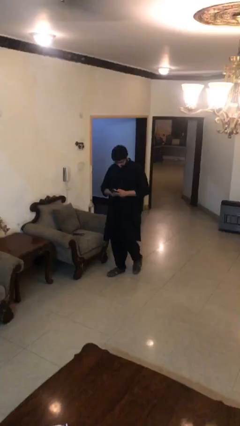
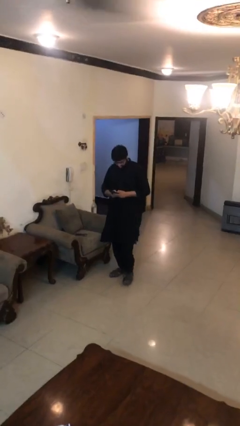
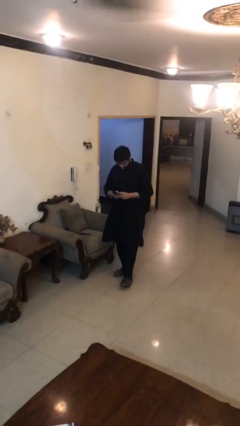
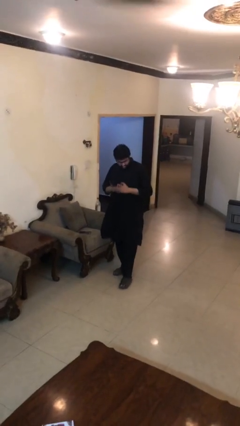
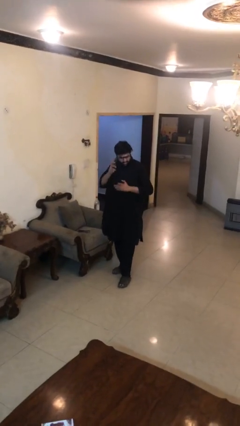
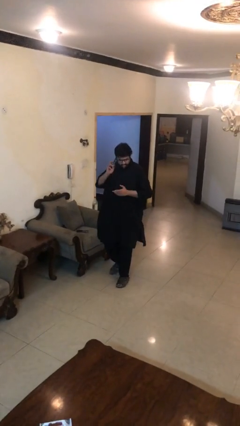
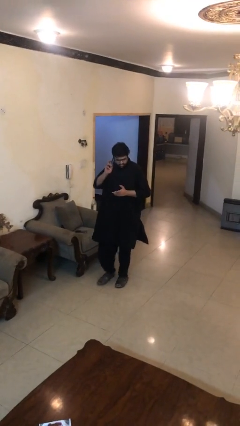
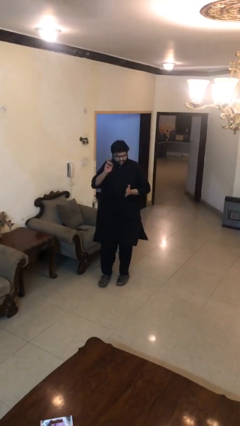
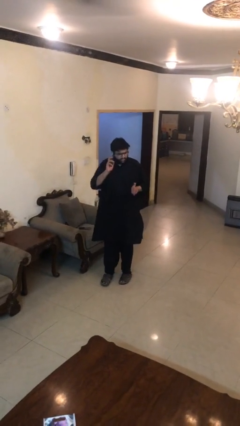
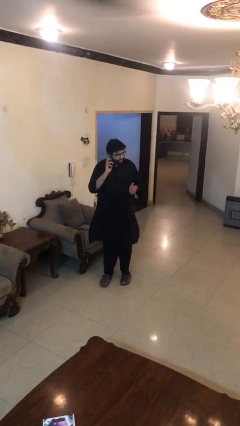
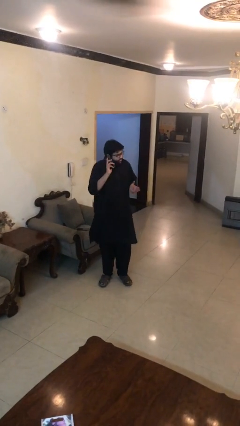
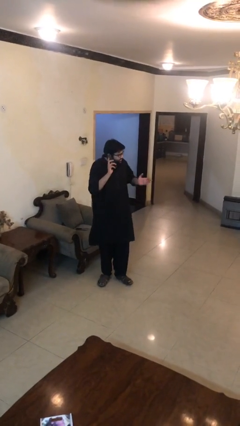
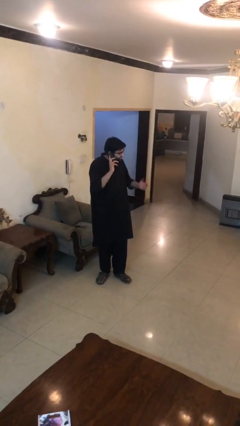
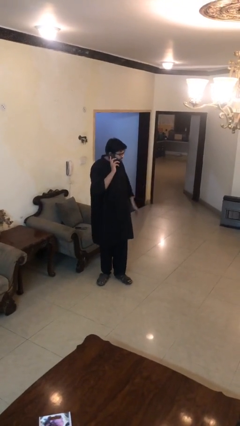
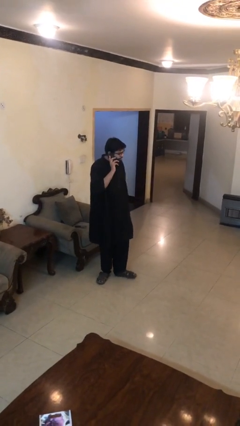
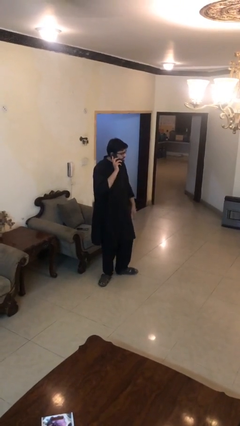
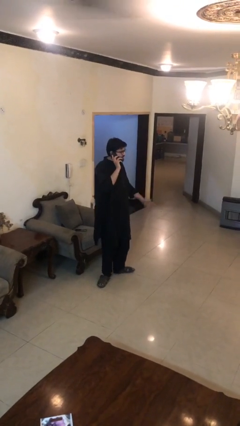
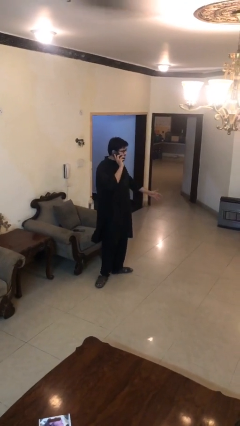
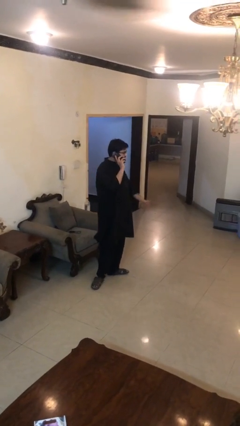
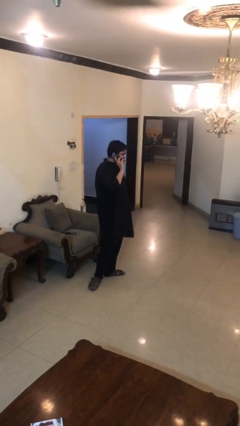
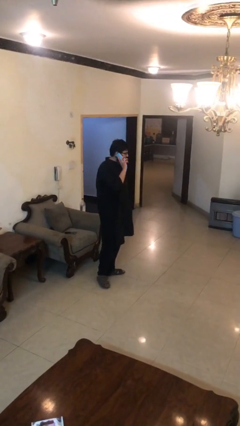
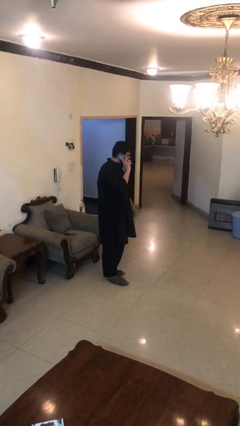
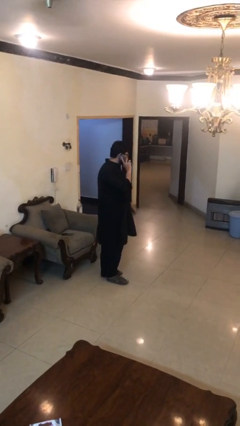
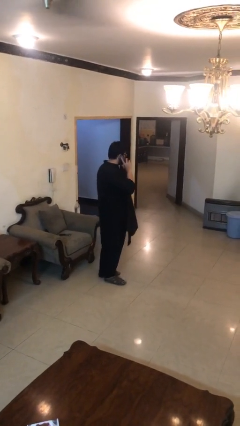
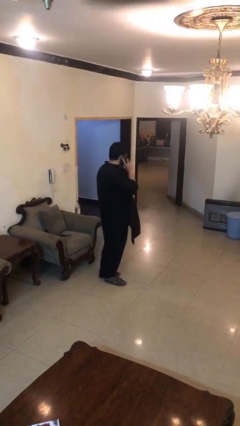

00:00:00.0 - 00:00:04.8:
person talks on phone

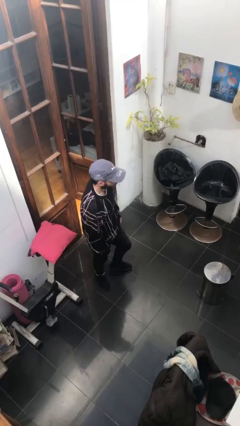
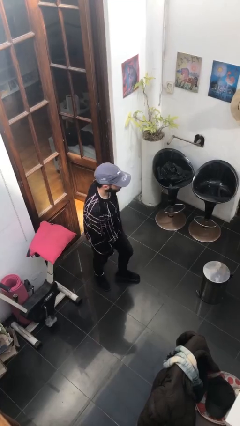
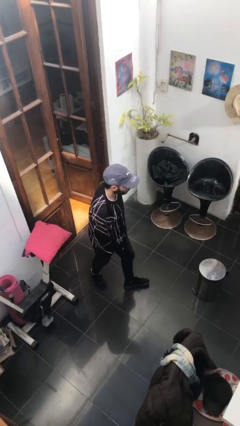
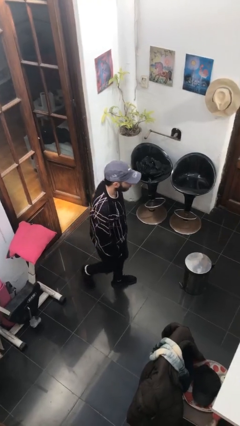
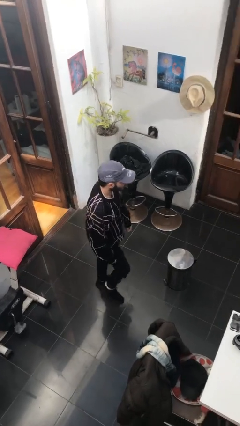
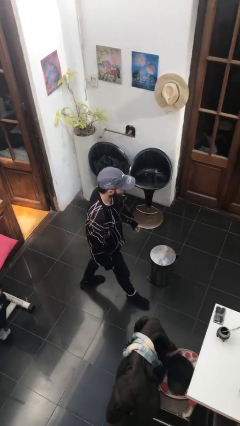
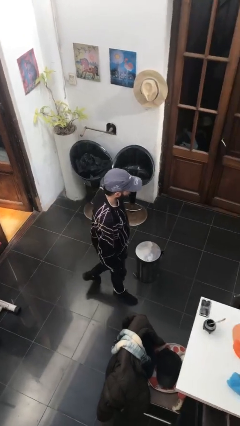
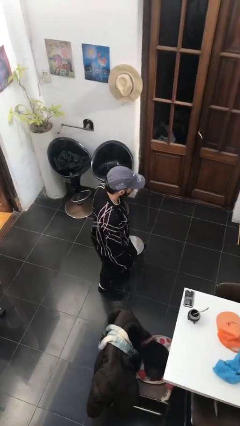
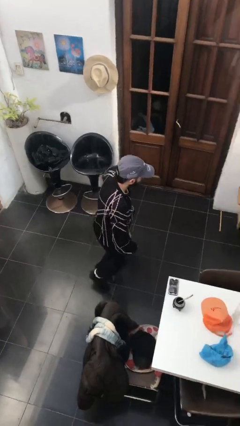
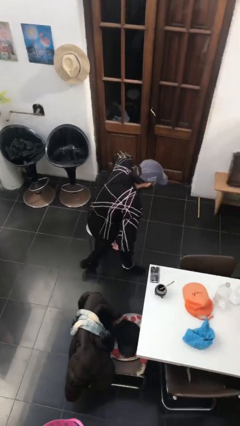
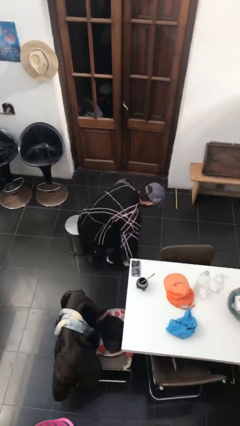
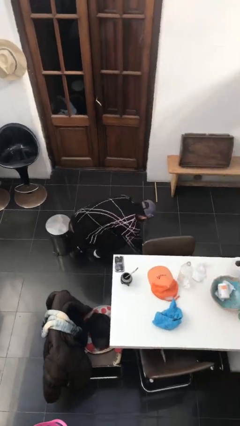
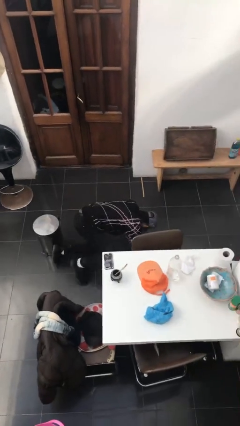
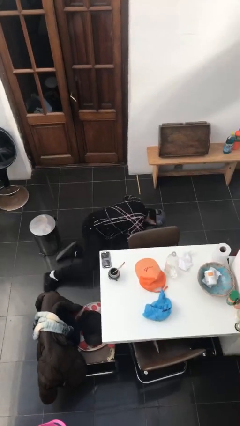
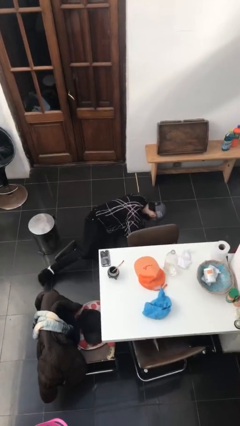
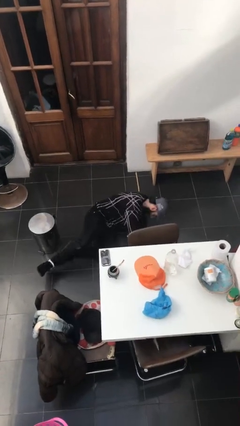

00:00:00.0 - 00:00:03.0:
person trips on object on floor

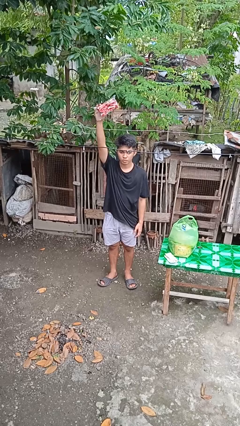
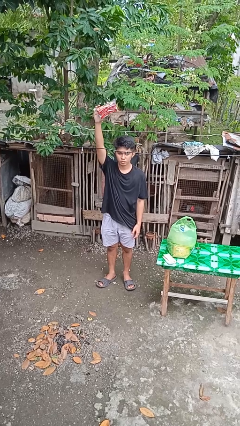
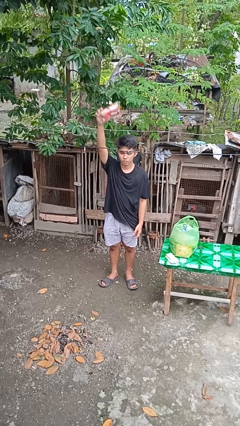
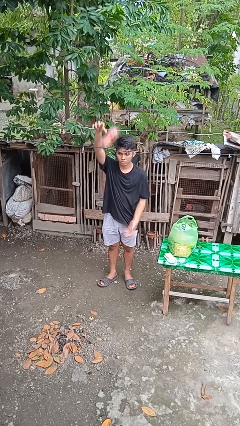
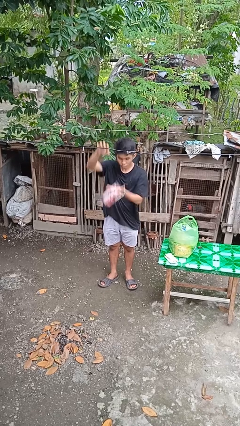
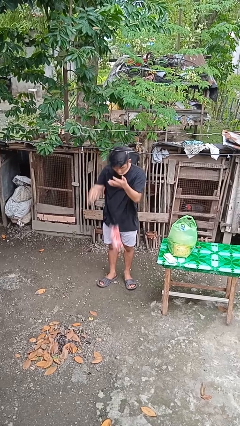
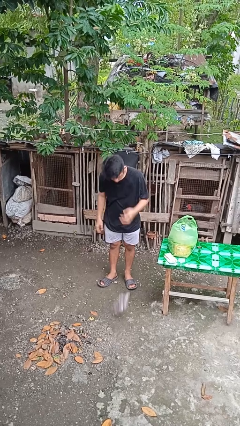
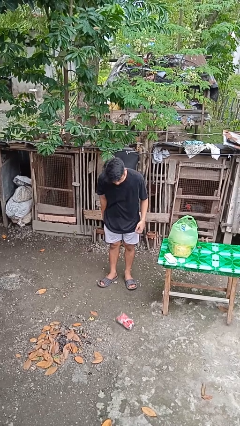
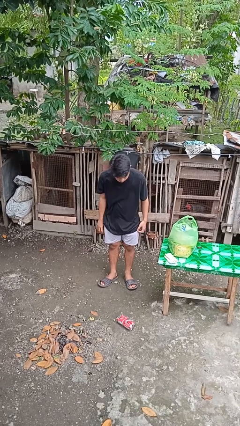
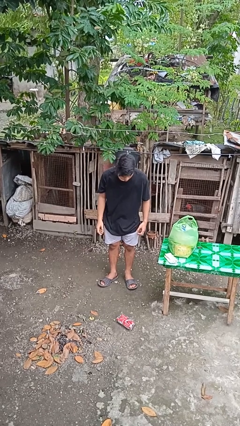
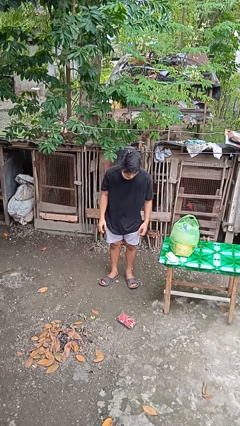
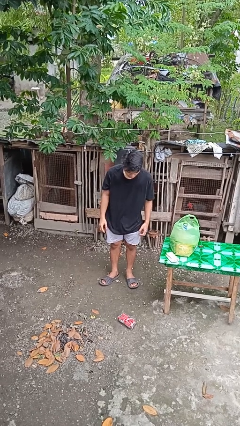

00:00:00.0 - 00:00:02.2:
person drops object

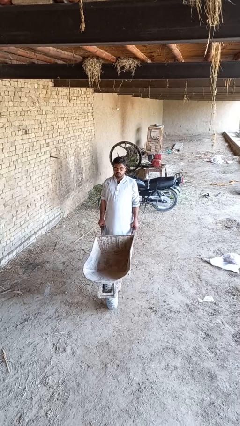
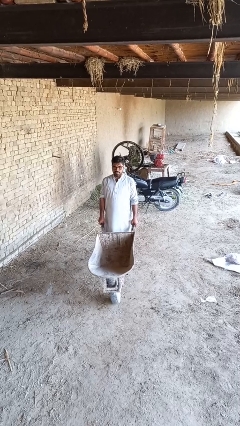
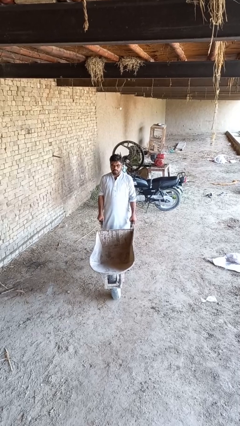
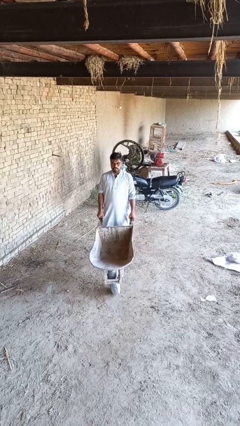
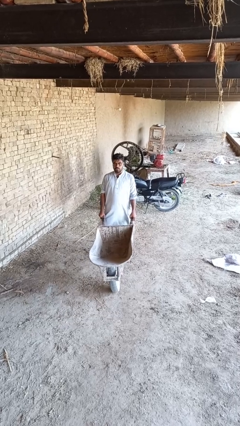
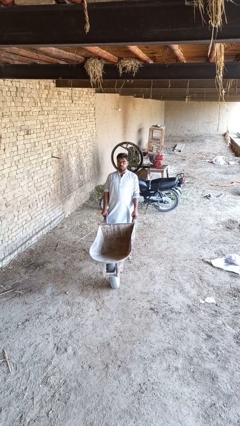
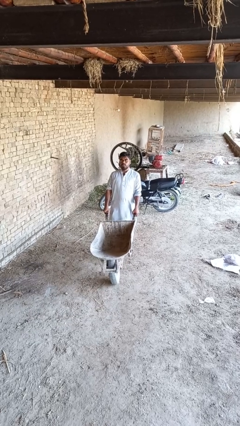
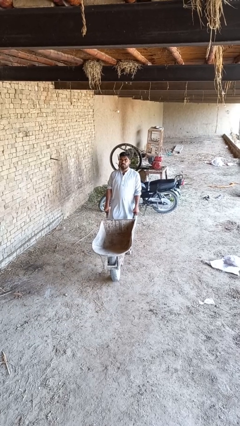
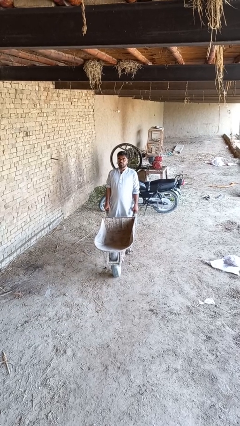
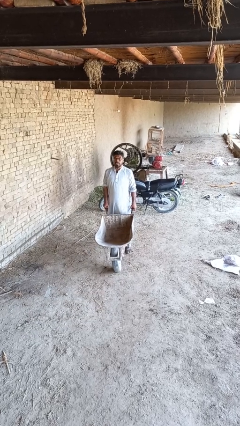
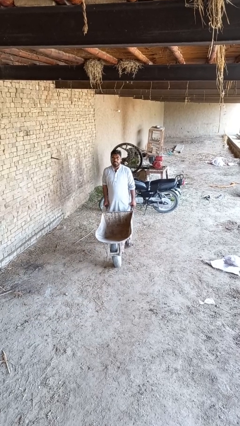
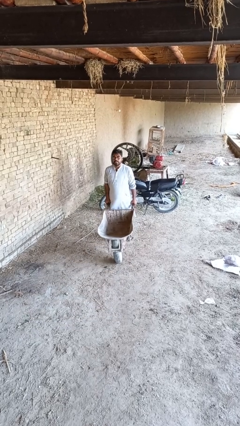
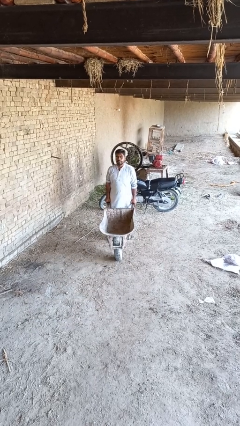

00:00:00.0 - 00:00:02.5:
person pulls wheeled cart

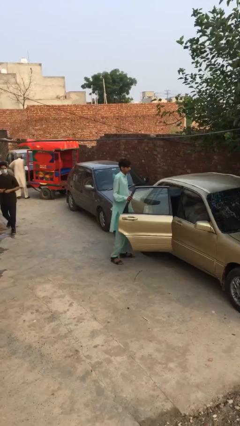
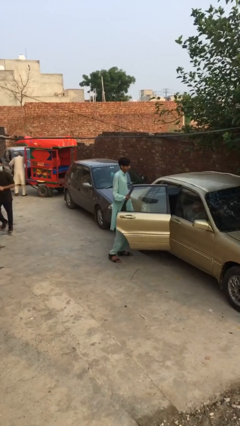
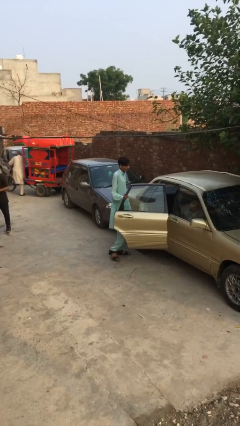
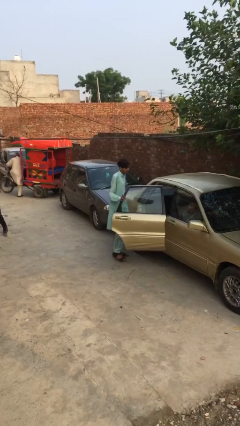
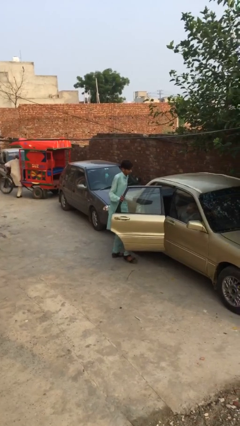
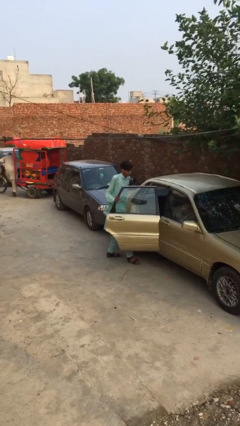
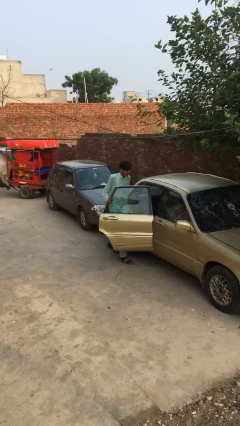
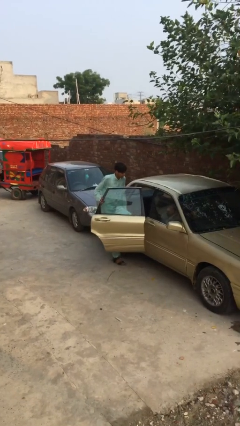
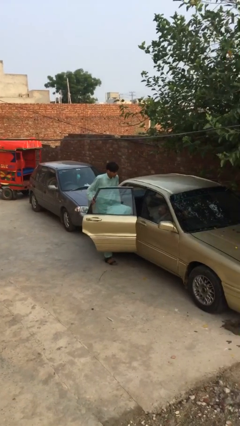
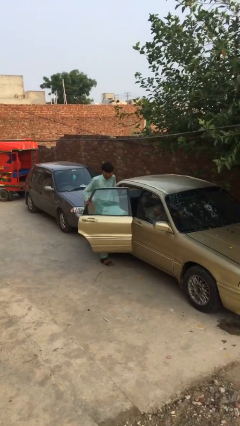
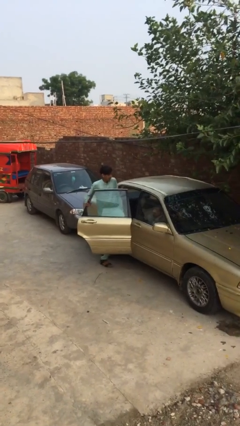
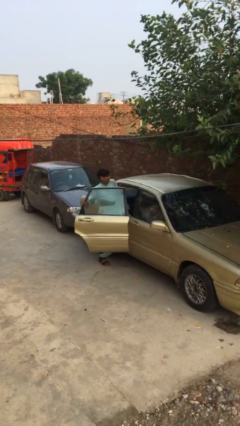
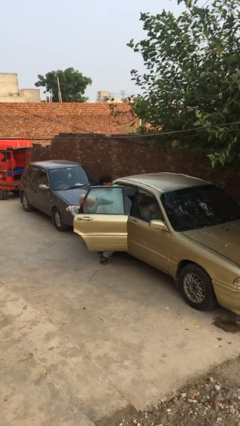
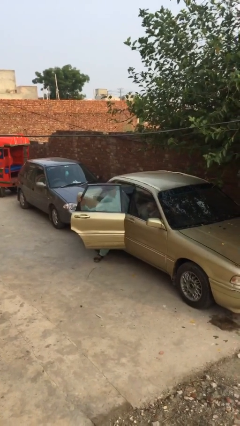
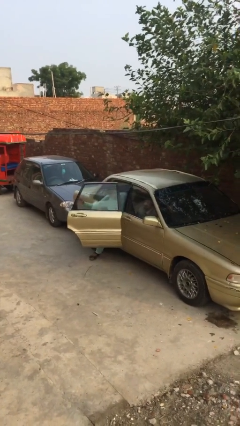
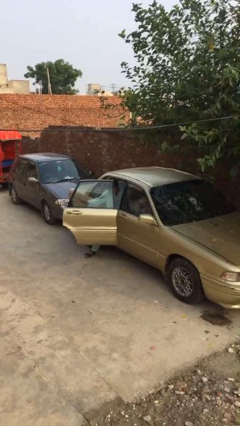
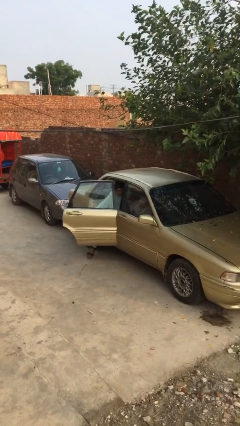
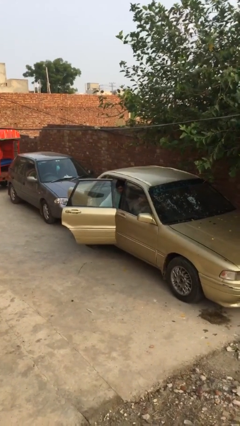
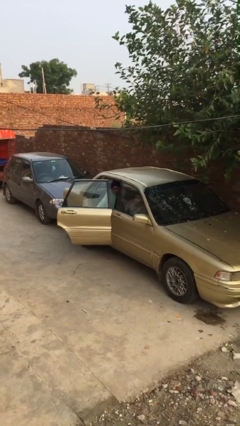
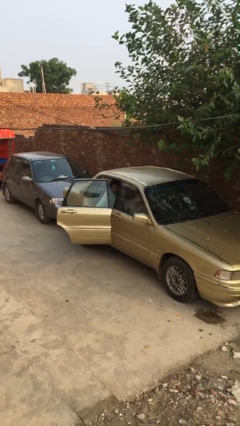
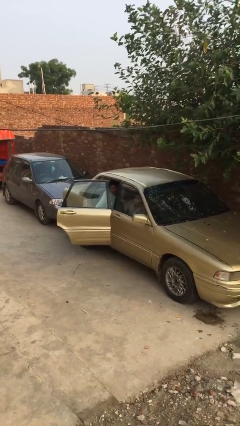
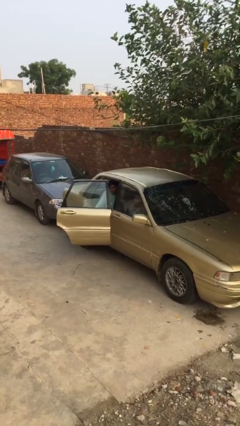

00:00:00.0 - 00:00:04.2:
person enters car

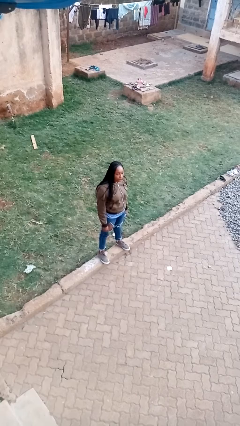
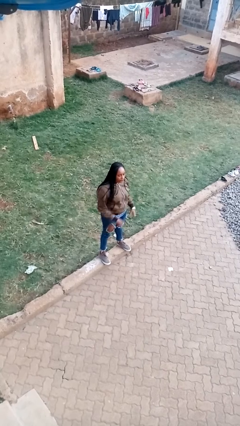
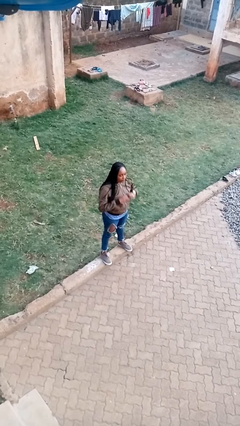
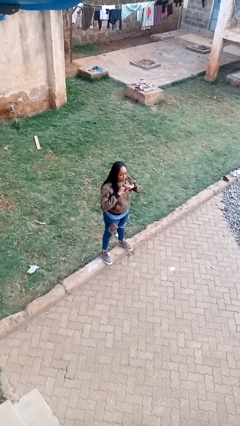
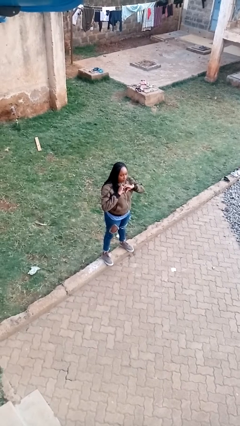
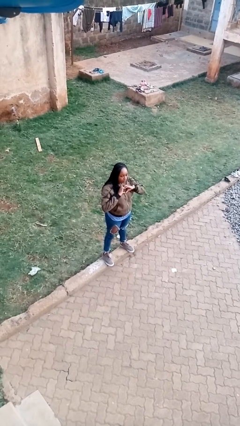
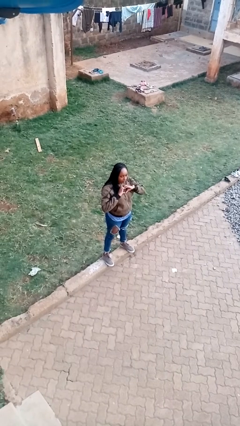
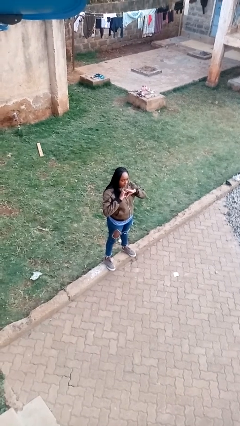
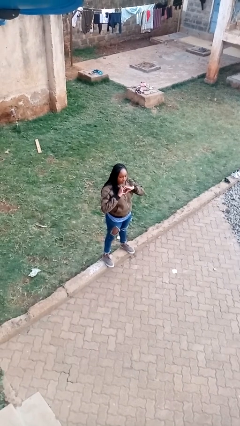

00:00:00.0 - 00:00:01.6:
person gestures heart
